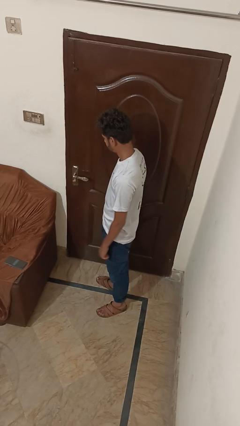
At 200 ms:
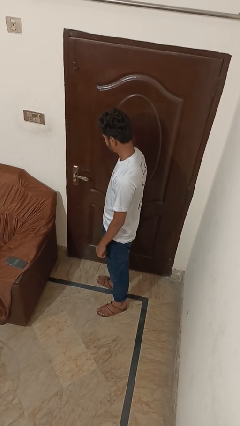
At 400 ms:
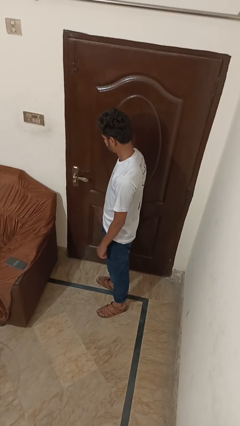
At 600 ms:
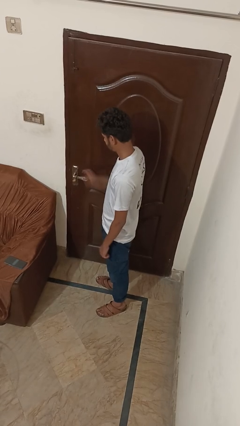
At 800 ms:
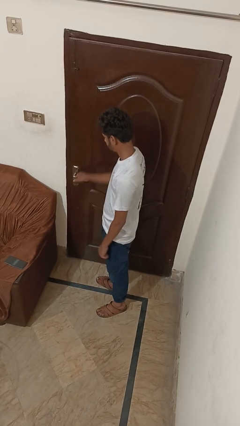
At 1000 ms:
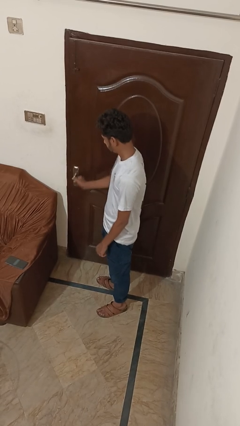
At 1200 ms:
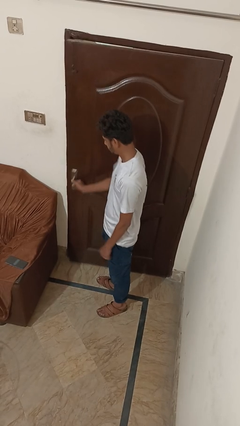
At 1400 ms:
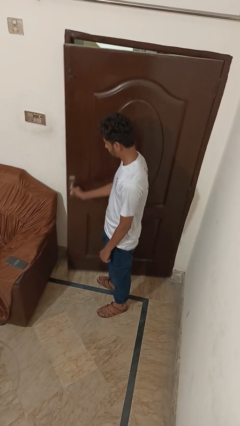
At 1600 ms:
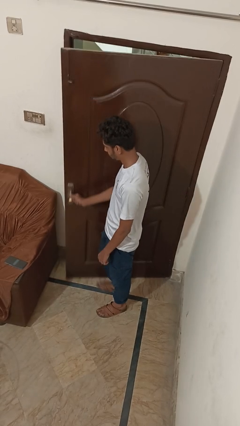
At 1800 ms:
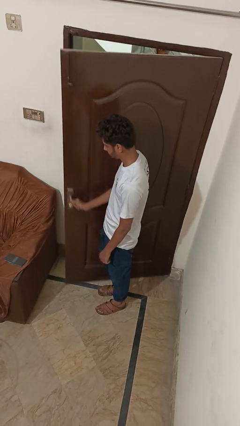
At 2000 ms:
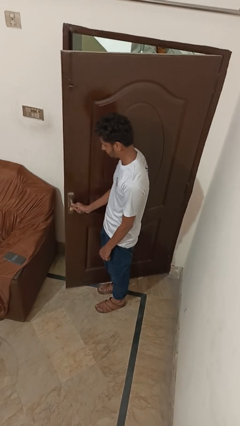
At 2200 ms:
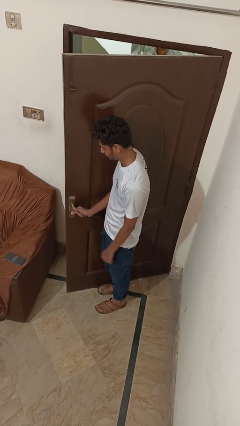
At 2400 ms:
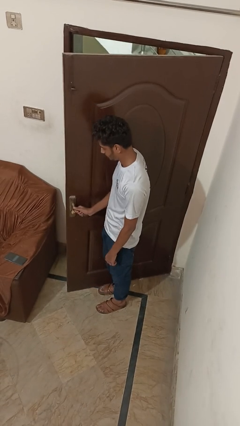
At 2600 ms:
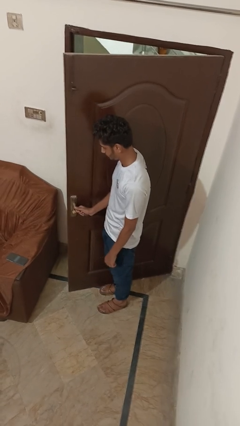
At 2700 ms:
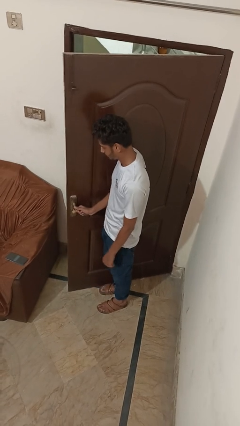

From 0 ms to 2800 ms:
person opens facility door

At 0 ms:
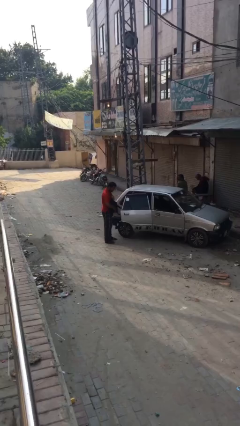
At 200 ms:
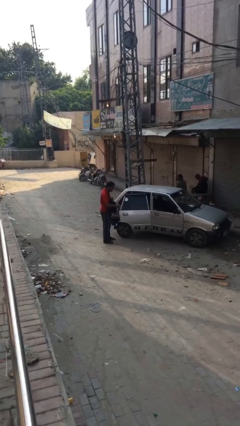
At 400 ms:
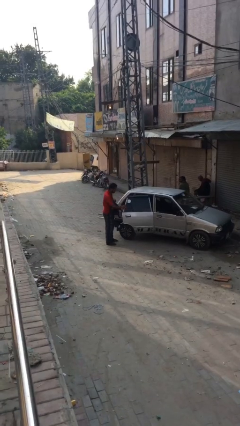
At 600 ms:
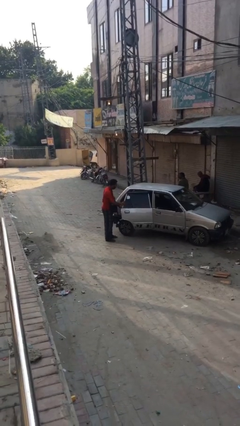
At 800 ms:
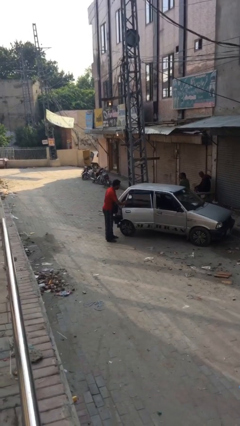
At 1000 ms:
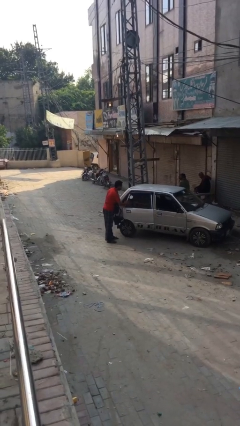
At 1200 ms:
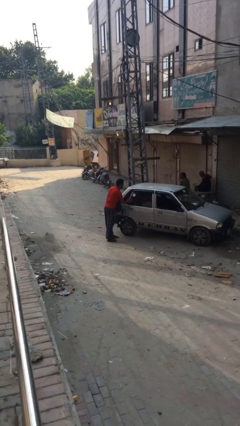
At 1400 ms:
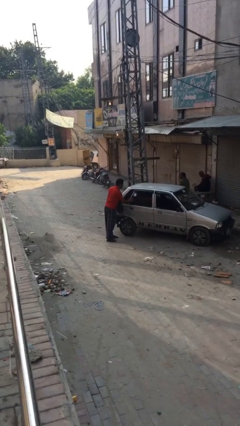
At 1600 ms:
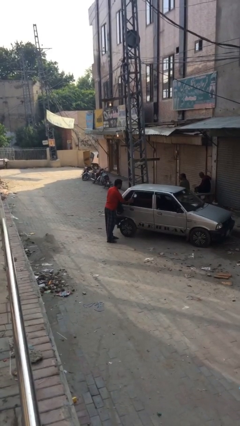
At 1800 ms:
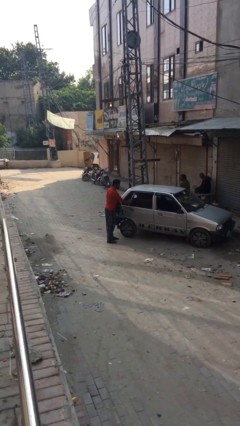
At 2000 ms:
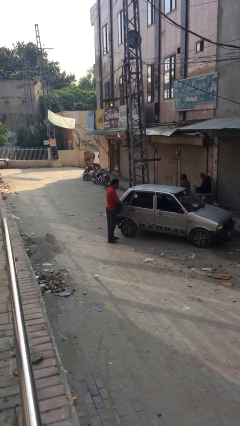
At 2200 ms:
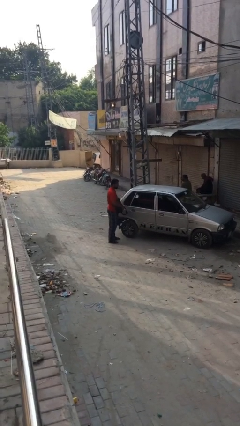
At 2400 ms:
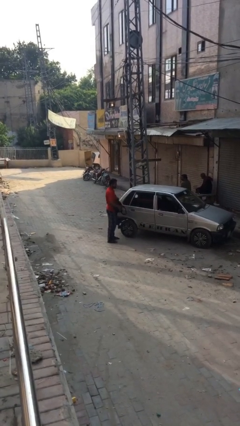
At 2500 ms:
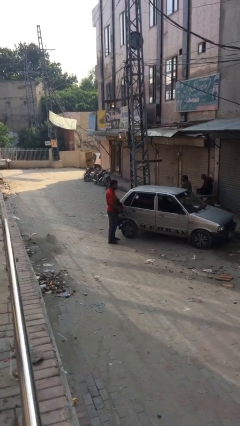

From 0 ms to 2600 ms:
person closes car door

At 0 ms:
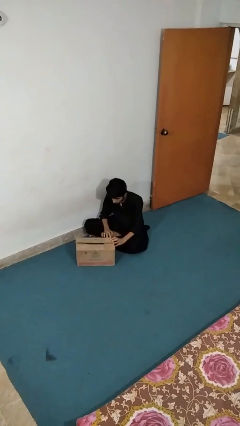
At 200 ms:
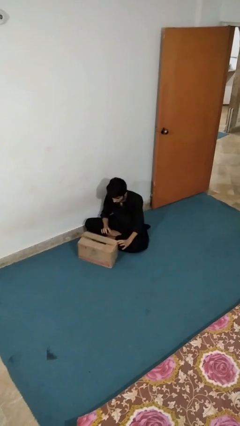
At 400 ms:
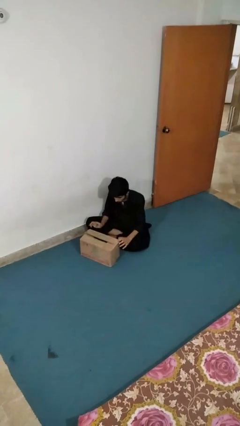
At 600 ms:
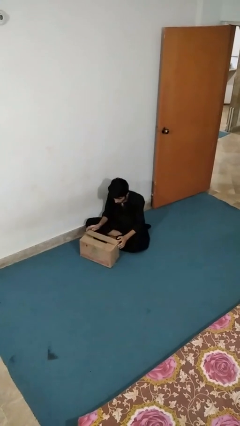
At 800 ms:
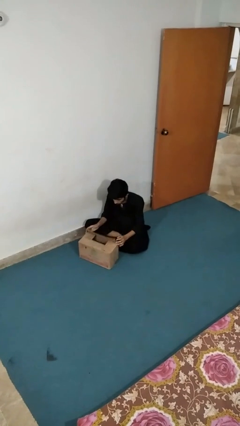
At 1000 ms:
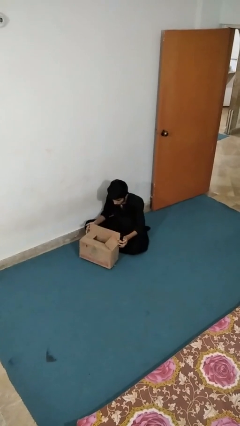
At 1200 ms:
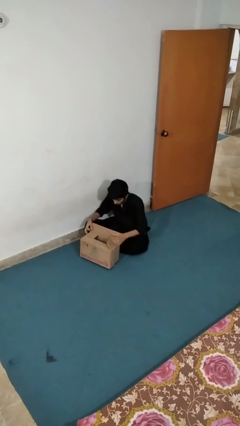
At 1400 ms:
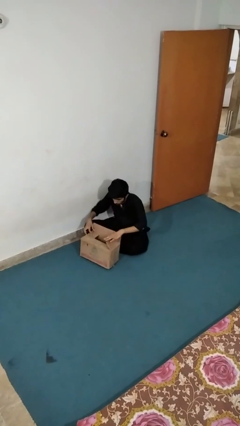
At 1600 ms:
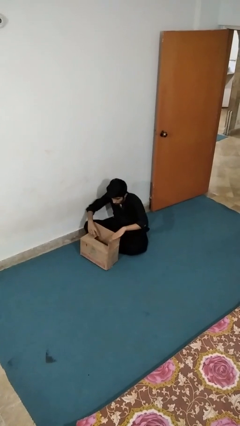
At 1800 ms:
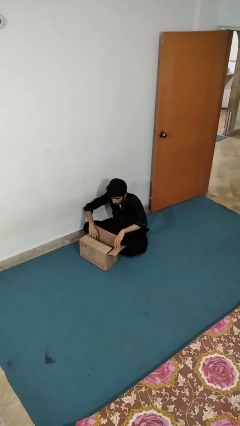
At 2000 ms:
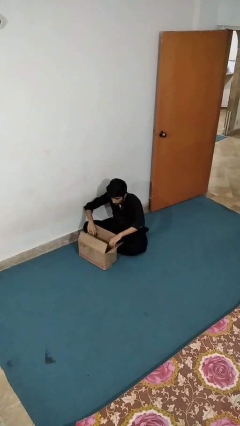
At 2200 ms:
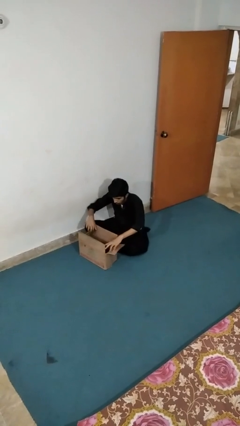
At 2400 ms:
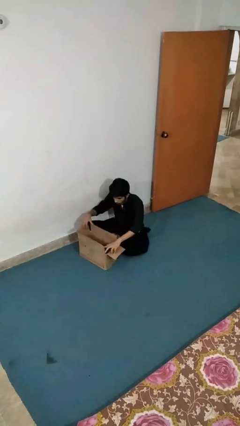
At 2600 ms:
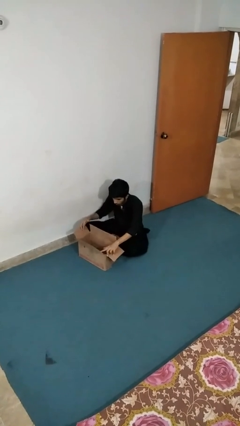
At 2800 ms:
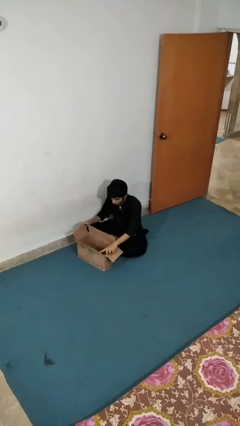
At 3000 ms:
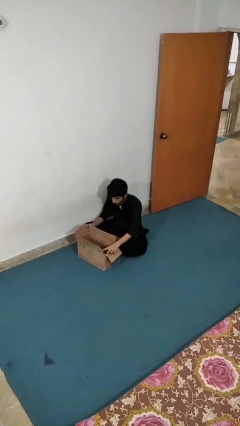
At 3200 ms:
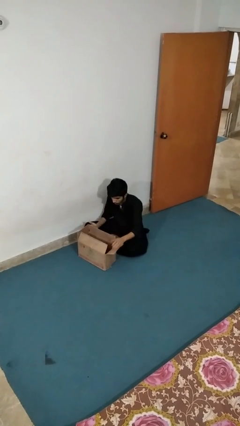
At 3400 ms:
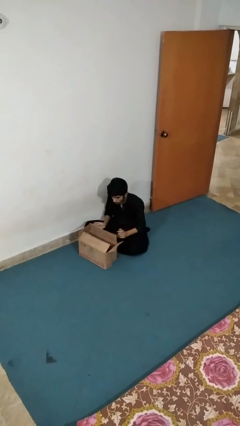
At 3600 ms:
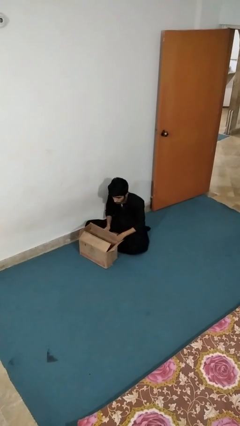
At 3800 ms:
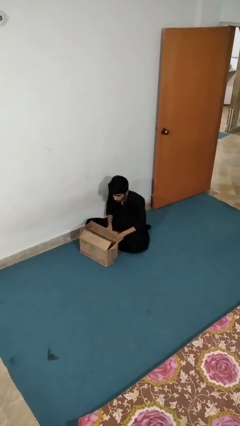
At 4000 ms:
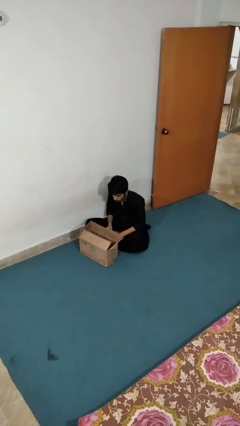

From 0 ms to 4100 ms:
person opens box

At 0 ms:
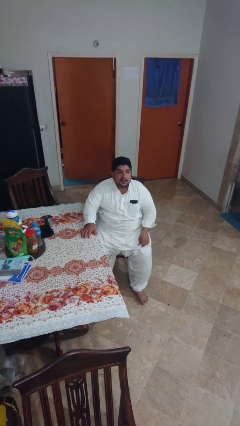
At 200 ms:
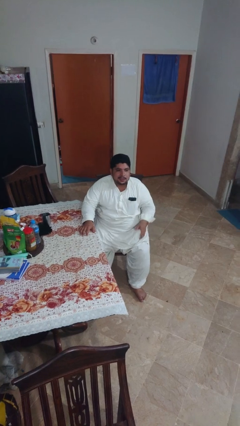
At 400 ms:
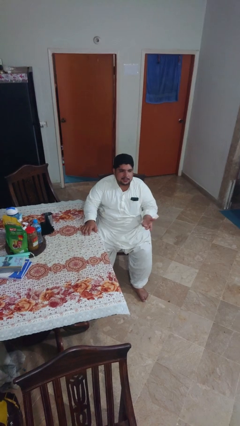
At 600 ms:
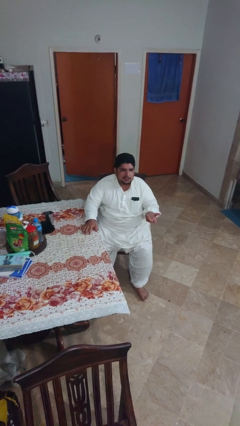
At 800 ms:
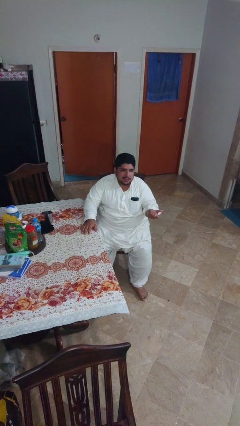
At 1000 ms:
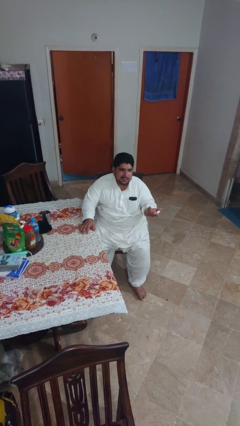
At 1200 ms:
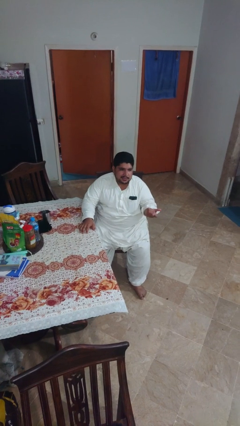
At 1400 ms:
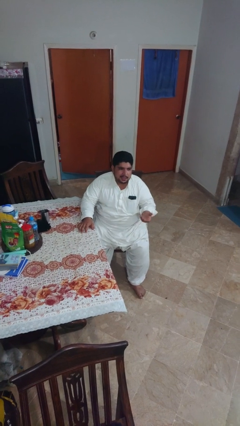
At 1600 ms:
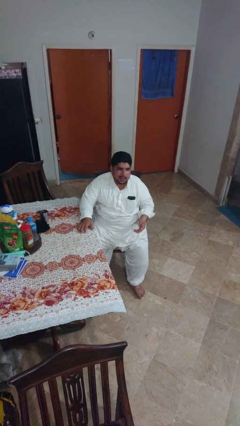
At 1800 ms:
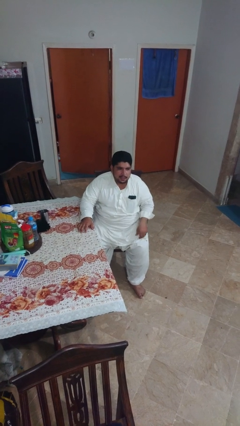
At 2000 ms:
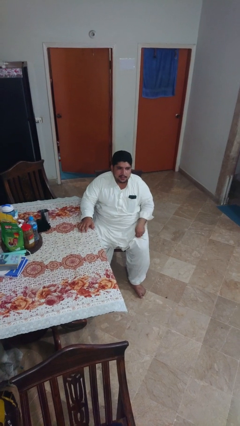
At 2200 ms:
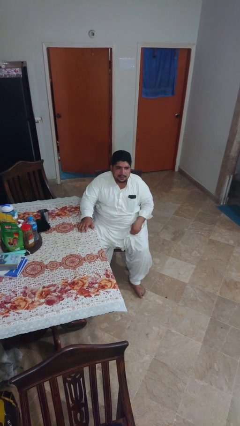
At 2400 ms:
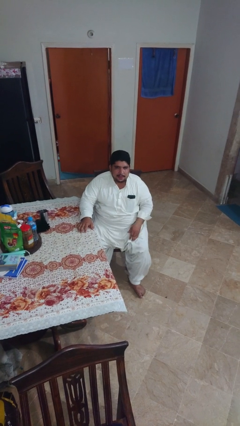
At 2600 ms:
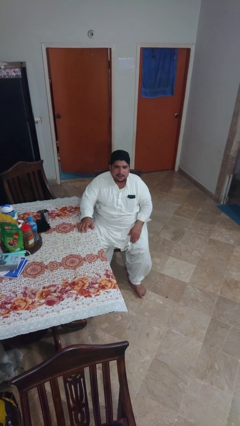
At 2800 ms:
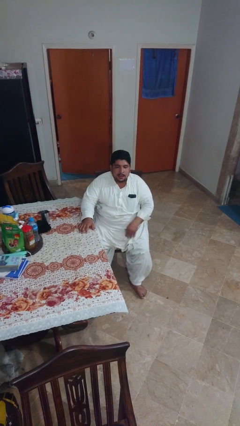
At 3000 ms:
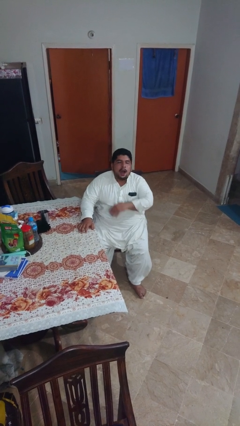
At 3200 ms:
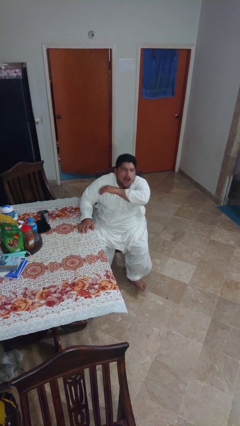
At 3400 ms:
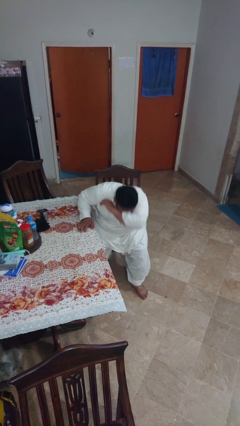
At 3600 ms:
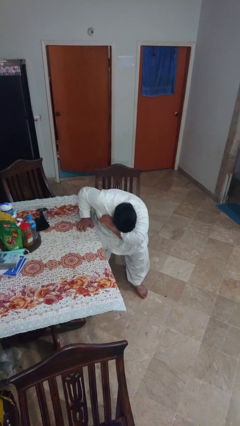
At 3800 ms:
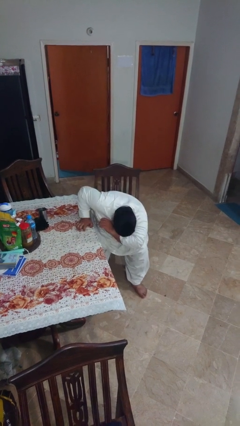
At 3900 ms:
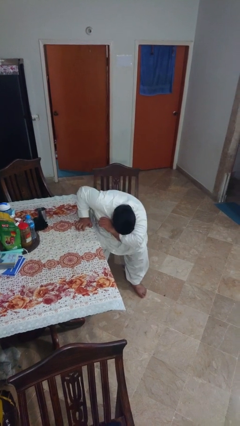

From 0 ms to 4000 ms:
person sneezes into arm

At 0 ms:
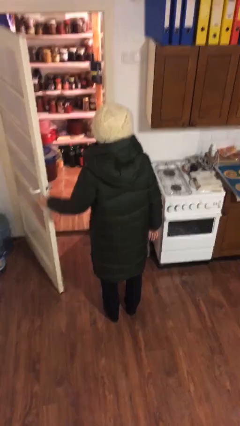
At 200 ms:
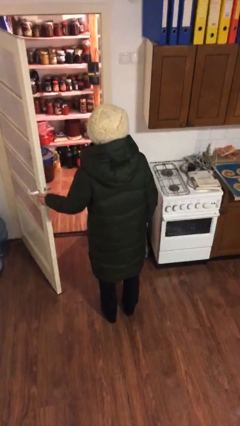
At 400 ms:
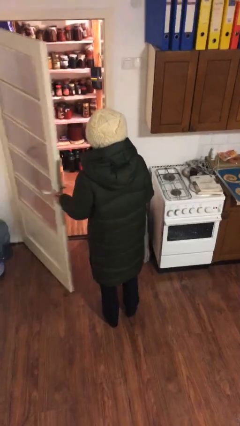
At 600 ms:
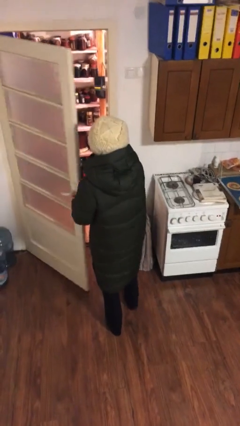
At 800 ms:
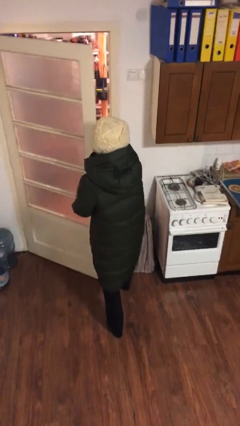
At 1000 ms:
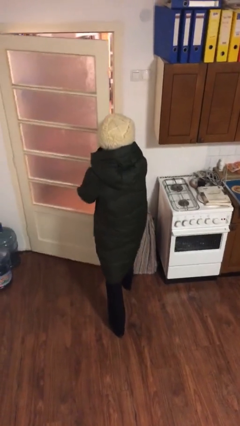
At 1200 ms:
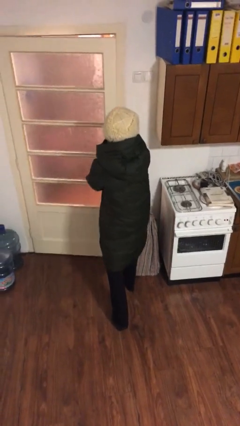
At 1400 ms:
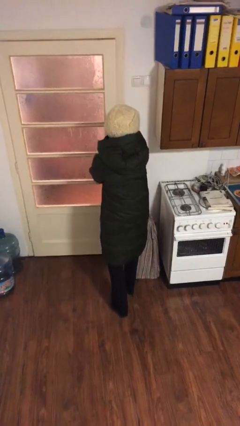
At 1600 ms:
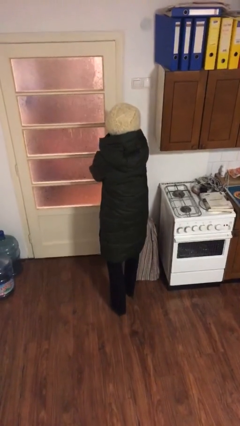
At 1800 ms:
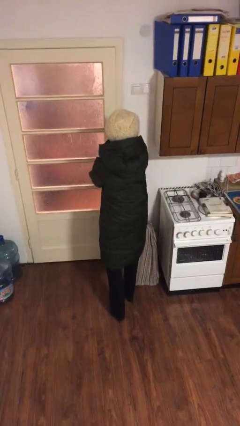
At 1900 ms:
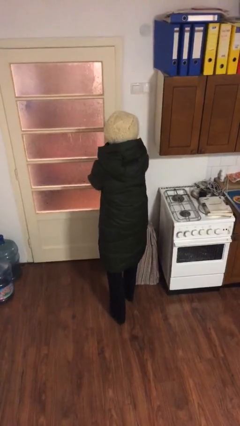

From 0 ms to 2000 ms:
person closes facility door

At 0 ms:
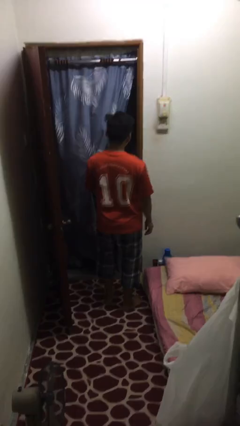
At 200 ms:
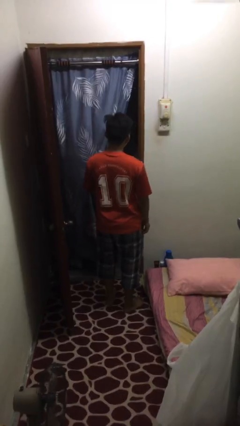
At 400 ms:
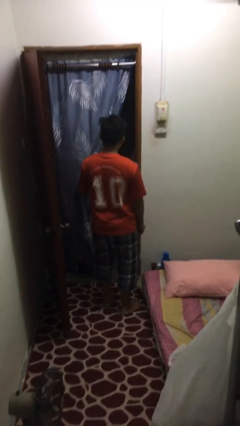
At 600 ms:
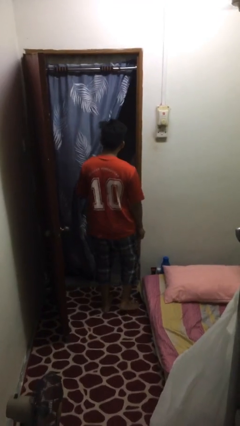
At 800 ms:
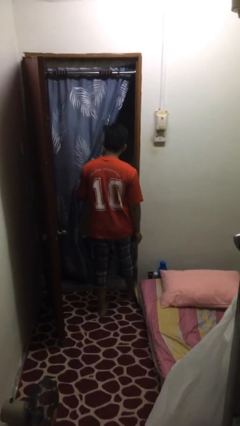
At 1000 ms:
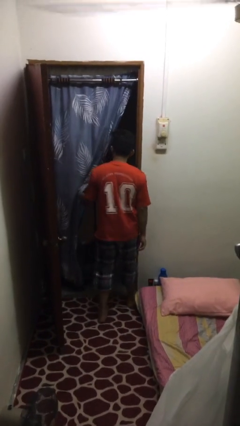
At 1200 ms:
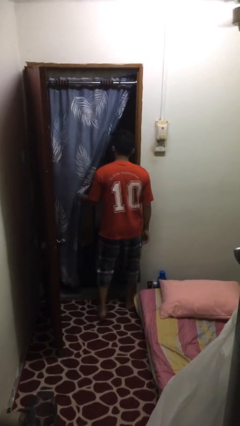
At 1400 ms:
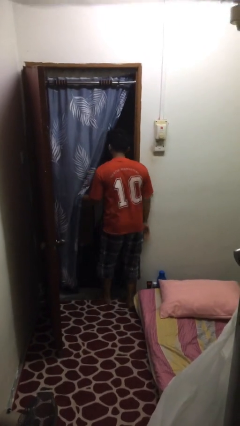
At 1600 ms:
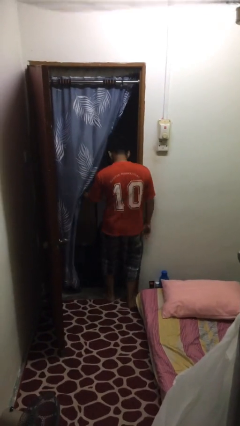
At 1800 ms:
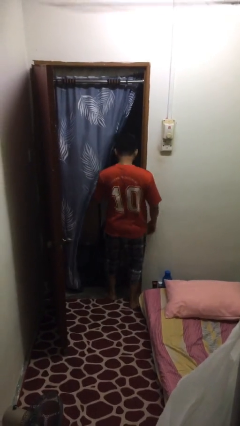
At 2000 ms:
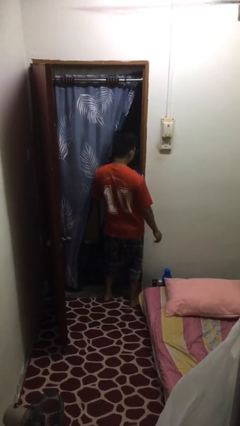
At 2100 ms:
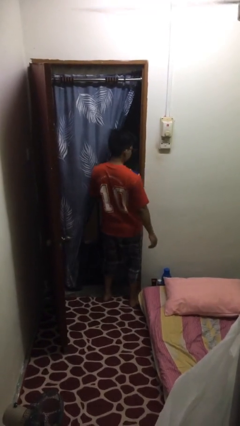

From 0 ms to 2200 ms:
person bumps into wall
